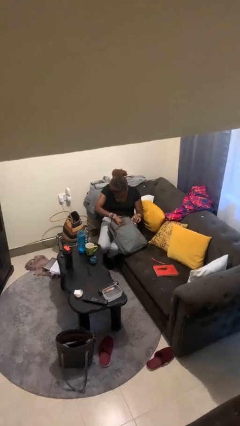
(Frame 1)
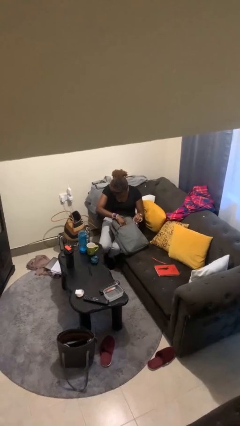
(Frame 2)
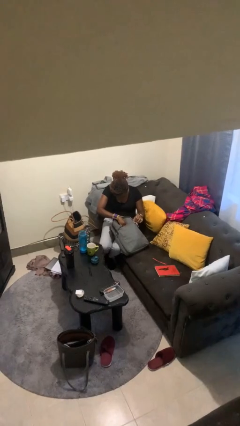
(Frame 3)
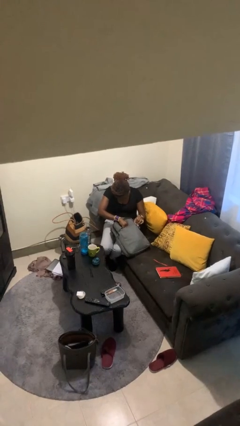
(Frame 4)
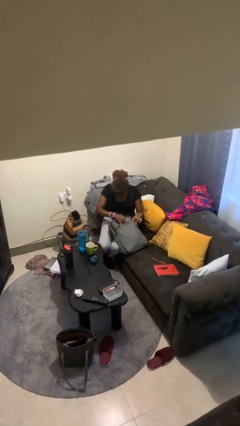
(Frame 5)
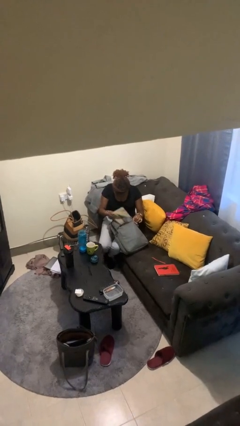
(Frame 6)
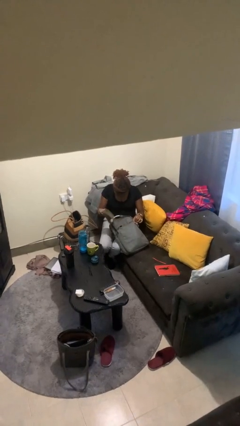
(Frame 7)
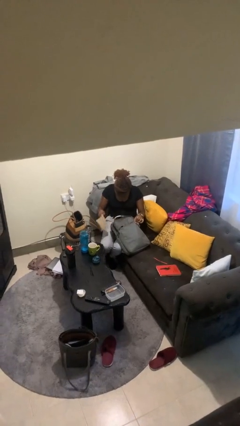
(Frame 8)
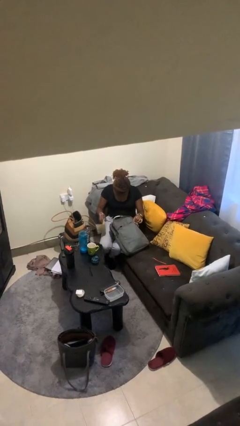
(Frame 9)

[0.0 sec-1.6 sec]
person takes object from backpack

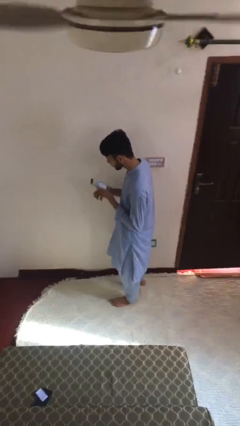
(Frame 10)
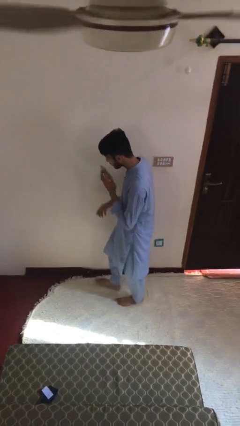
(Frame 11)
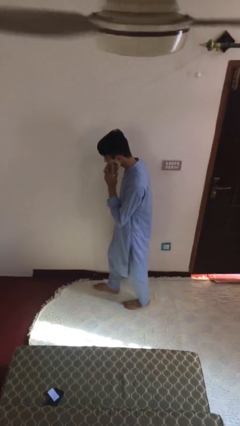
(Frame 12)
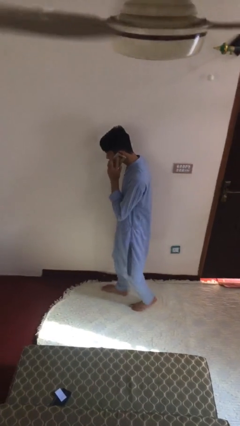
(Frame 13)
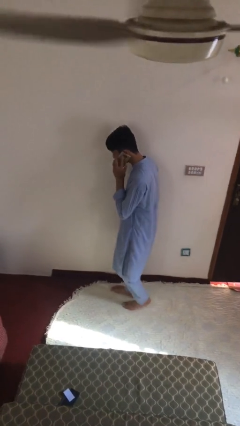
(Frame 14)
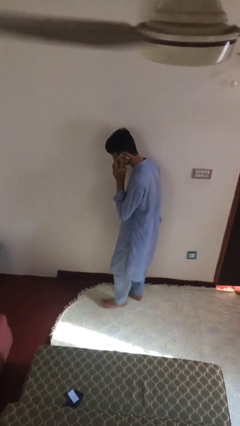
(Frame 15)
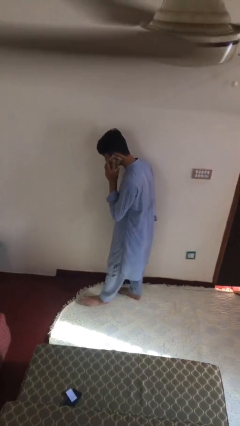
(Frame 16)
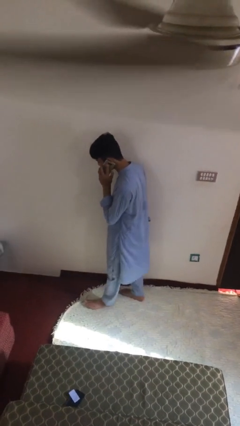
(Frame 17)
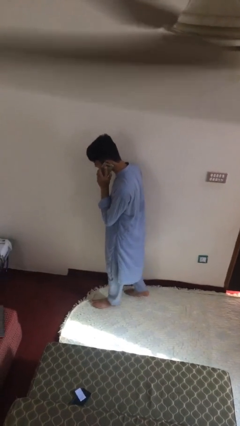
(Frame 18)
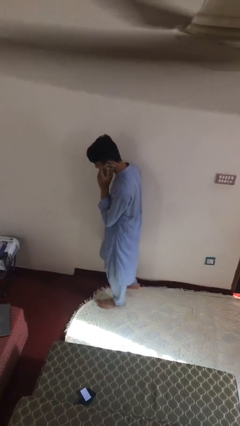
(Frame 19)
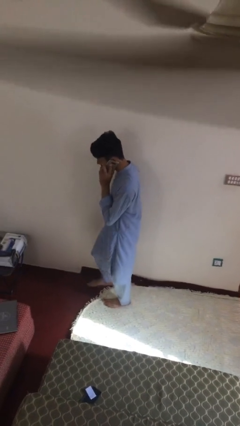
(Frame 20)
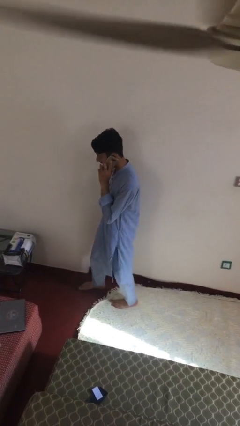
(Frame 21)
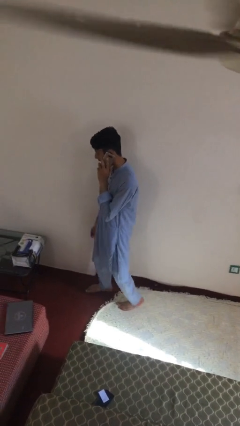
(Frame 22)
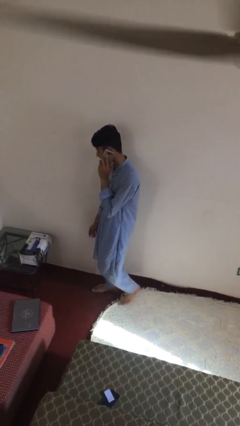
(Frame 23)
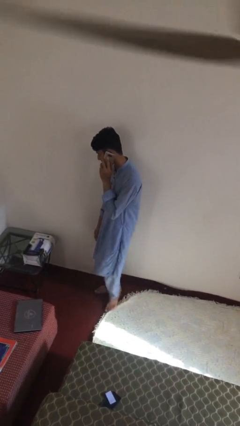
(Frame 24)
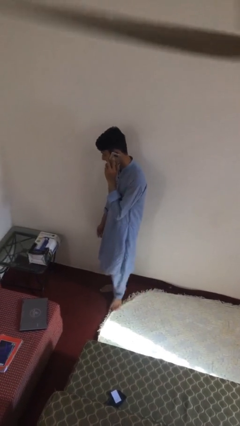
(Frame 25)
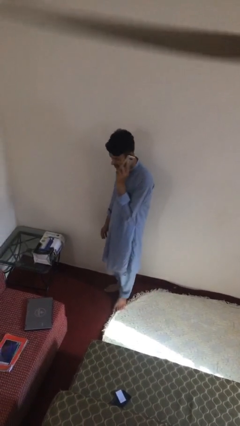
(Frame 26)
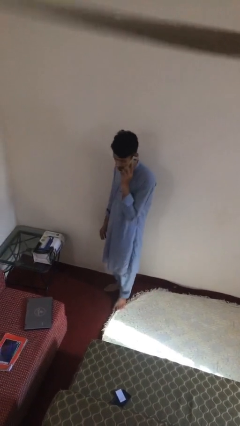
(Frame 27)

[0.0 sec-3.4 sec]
person talks on phone

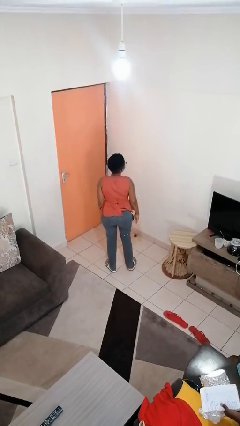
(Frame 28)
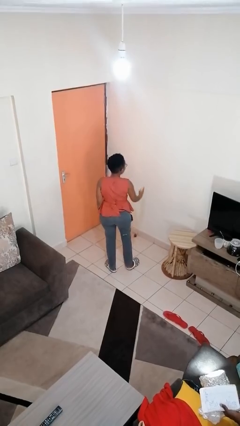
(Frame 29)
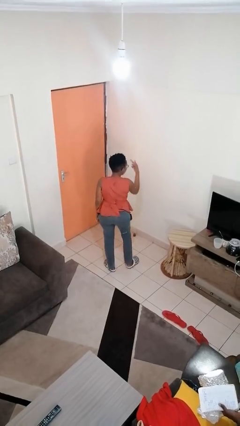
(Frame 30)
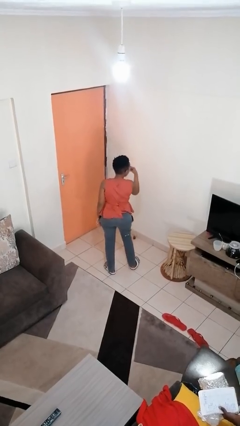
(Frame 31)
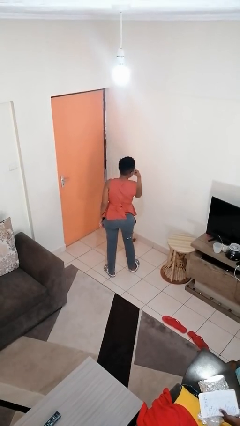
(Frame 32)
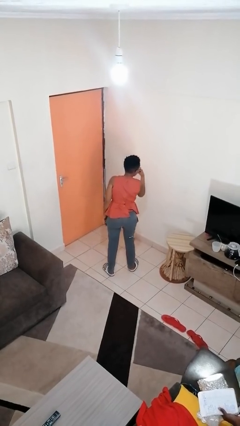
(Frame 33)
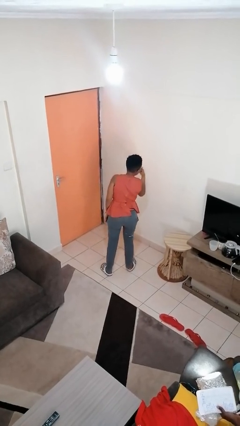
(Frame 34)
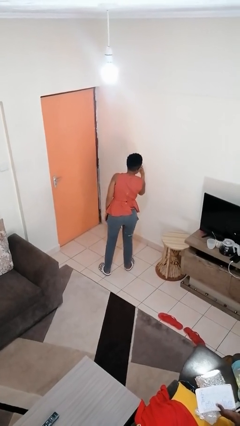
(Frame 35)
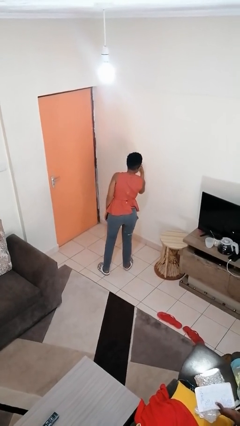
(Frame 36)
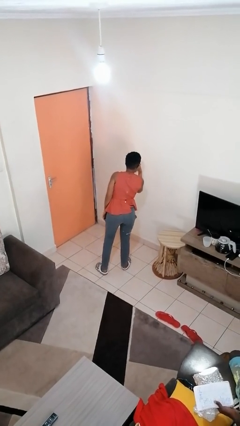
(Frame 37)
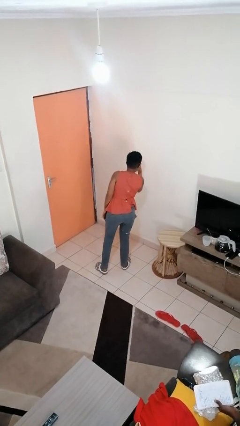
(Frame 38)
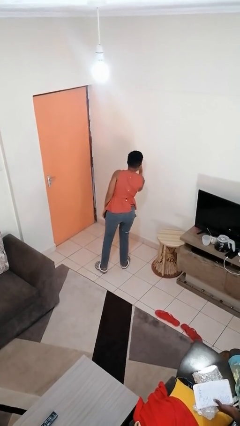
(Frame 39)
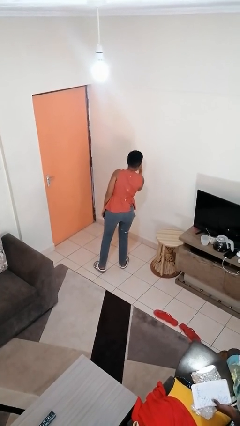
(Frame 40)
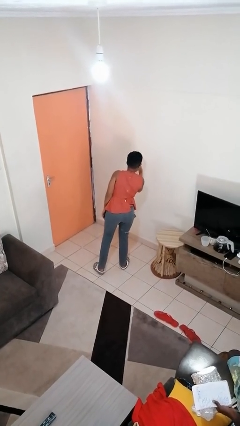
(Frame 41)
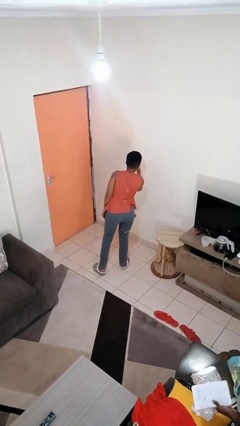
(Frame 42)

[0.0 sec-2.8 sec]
person gestures watch closely

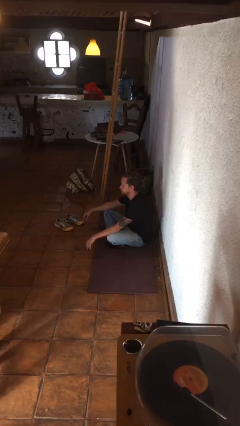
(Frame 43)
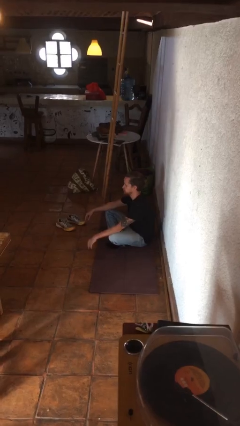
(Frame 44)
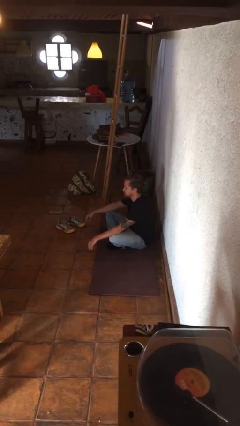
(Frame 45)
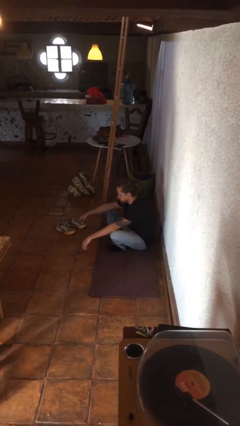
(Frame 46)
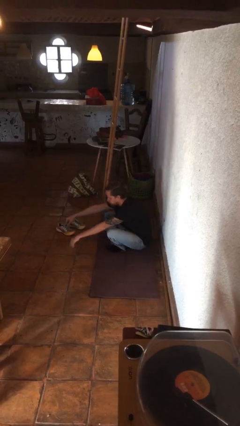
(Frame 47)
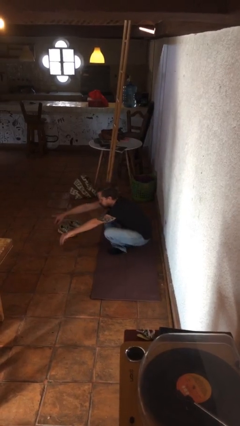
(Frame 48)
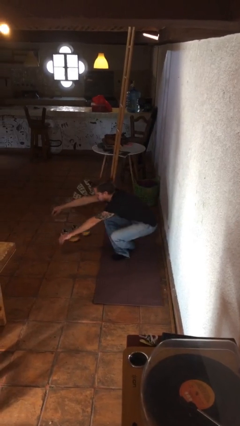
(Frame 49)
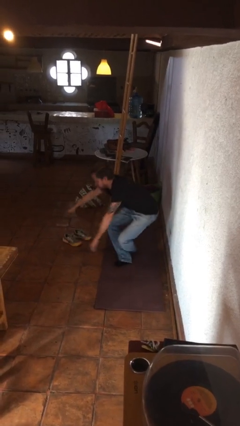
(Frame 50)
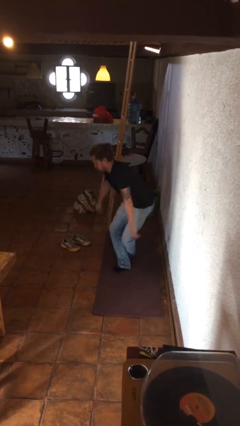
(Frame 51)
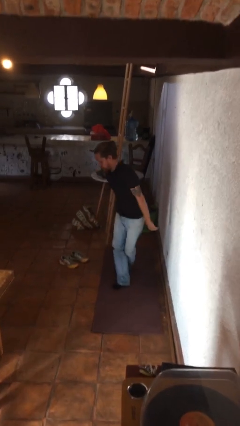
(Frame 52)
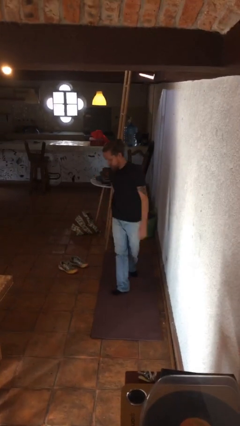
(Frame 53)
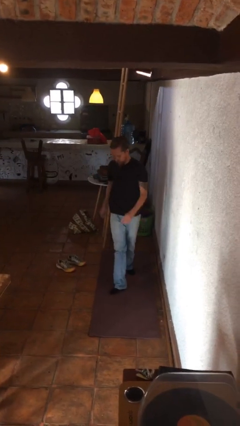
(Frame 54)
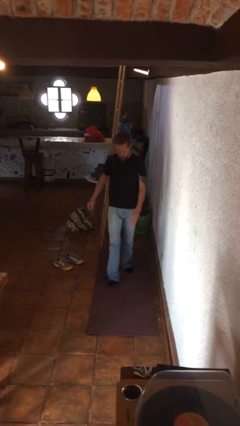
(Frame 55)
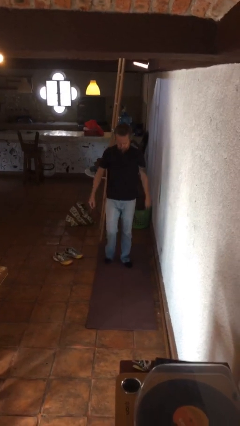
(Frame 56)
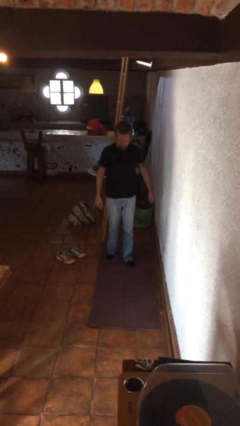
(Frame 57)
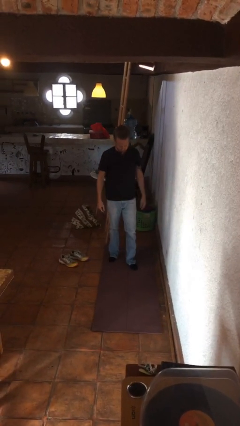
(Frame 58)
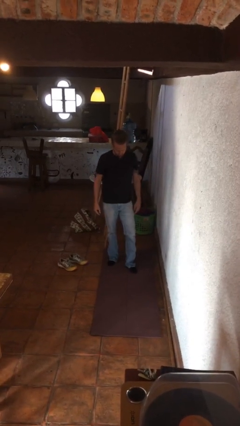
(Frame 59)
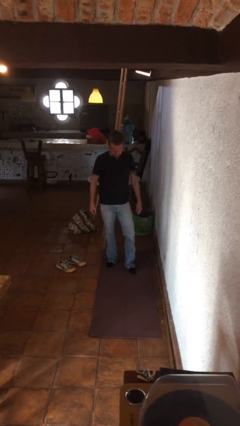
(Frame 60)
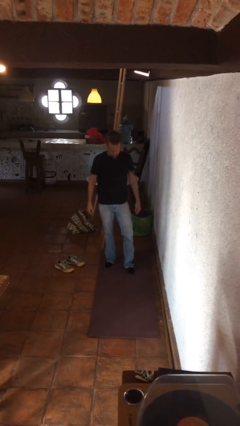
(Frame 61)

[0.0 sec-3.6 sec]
person stands up from floor

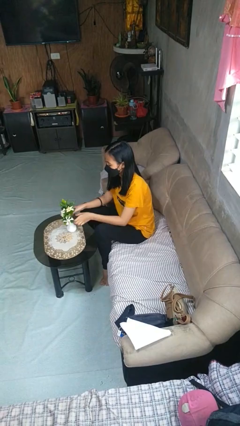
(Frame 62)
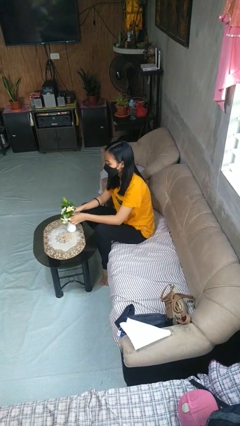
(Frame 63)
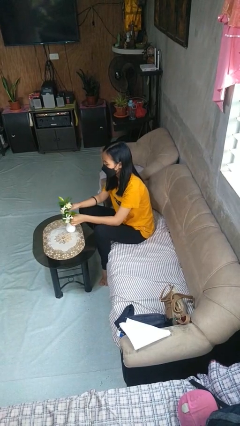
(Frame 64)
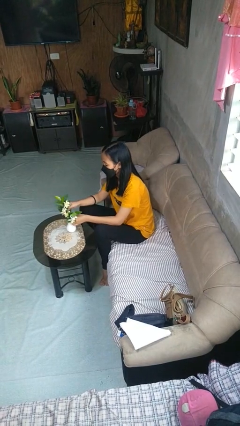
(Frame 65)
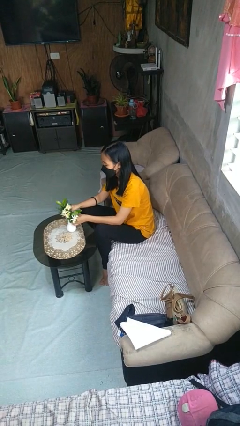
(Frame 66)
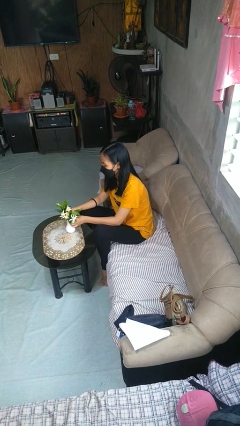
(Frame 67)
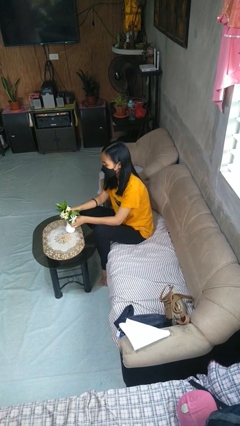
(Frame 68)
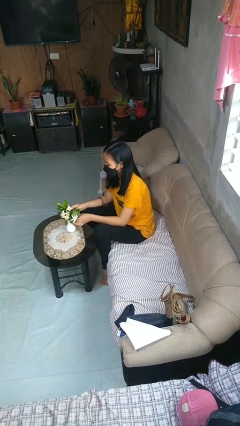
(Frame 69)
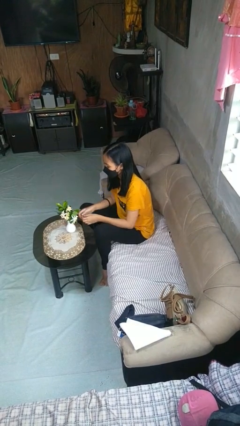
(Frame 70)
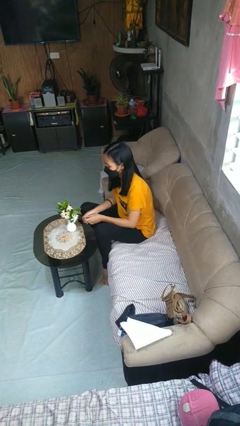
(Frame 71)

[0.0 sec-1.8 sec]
person arranges flowers in vase

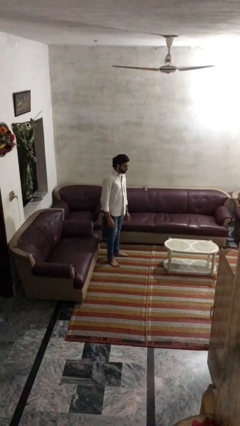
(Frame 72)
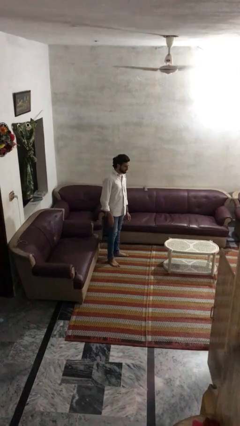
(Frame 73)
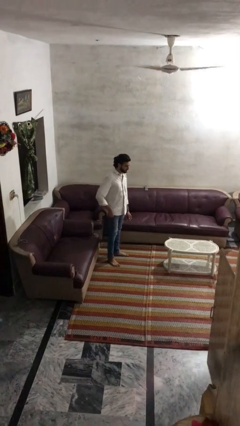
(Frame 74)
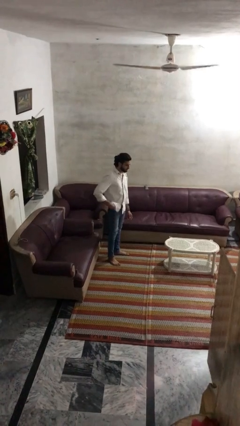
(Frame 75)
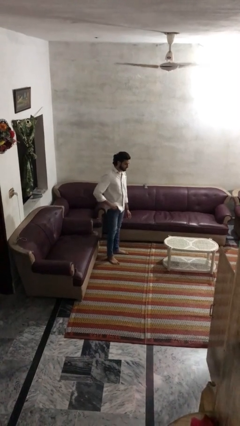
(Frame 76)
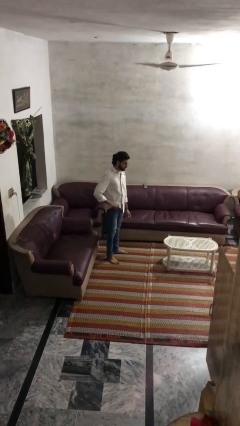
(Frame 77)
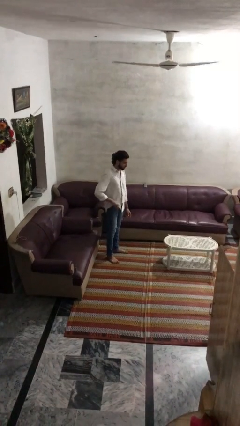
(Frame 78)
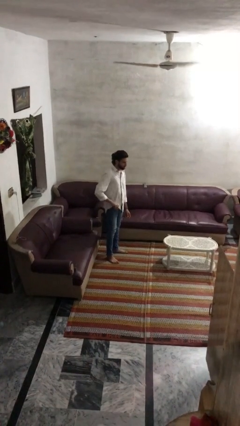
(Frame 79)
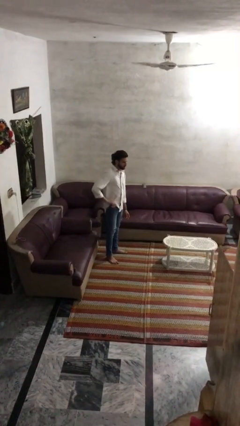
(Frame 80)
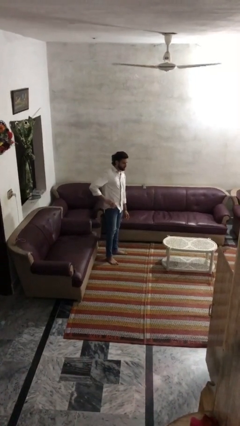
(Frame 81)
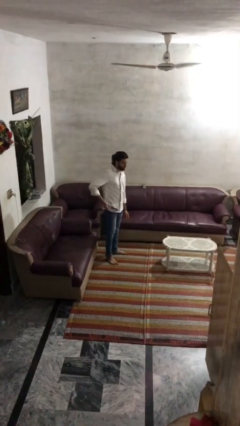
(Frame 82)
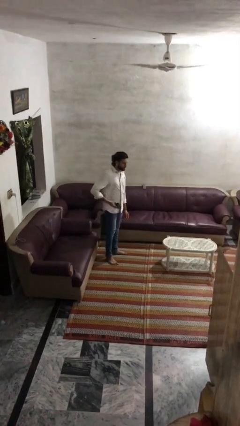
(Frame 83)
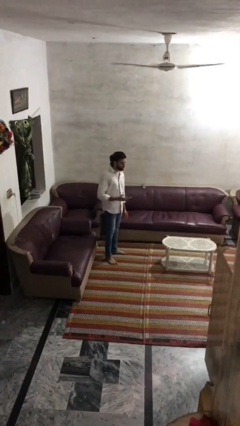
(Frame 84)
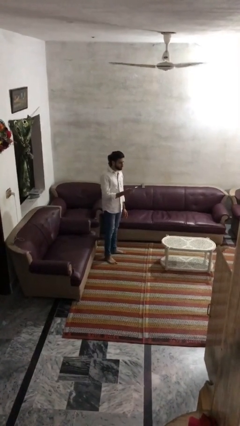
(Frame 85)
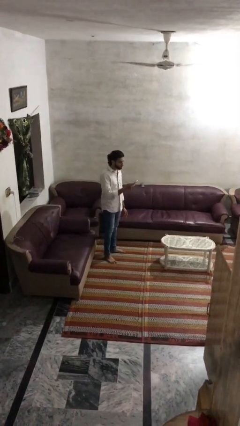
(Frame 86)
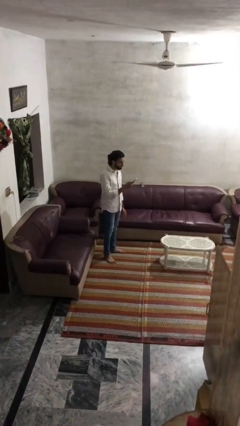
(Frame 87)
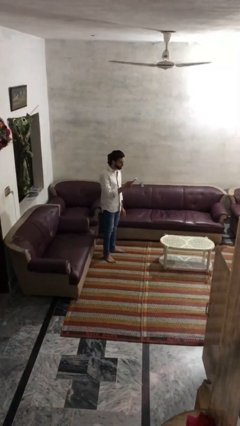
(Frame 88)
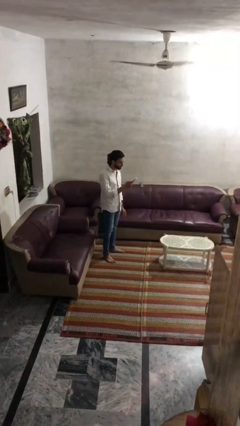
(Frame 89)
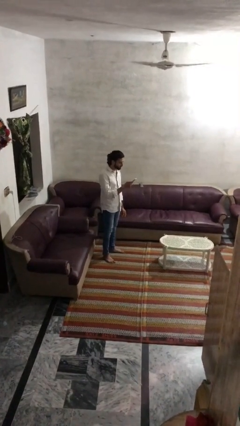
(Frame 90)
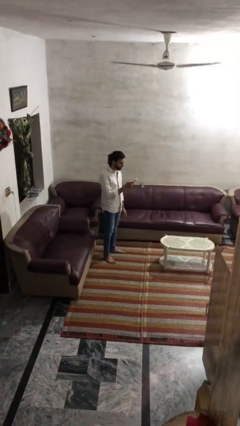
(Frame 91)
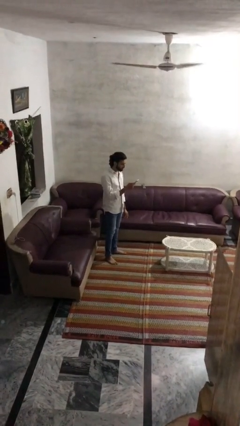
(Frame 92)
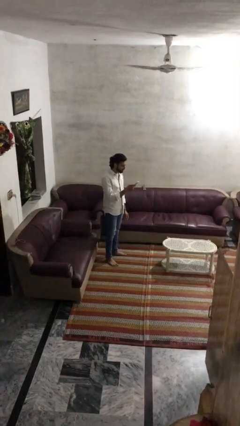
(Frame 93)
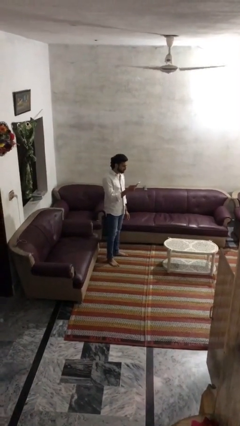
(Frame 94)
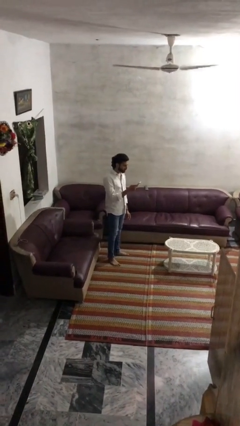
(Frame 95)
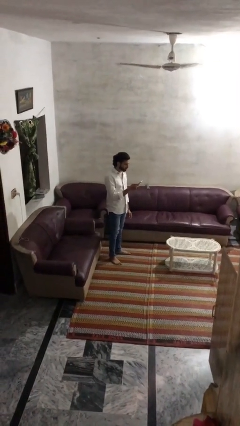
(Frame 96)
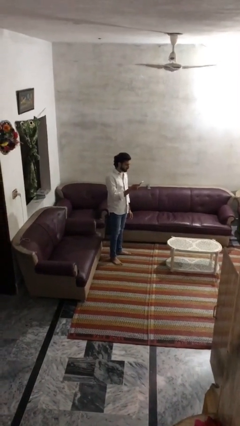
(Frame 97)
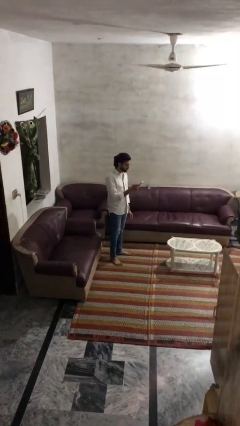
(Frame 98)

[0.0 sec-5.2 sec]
person takes phone from pocket
